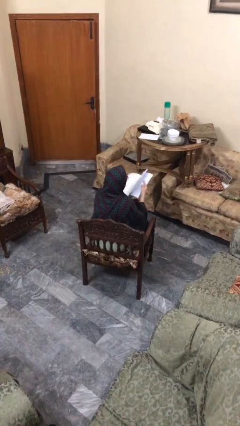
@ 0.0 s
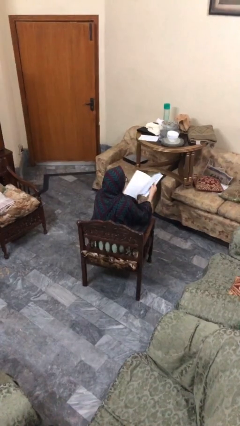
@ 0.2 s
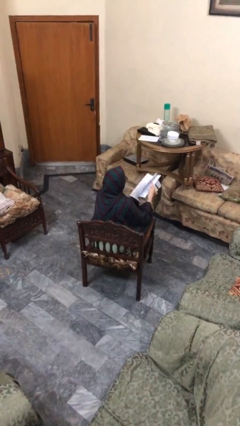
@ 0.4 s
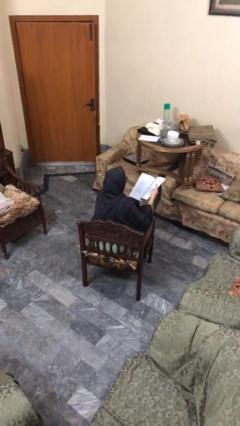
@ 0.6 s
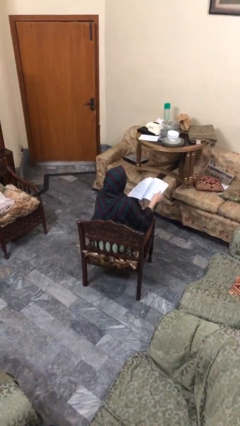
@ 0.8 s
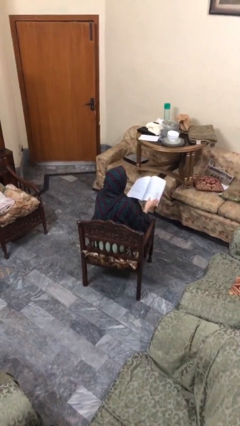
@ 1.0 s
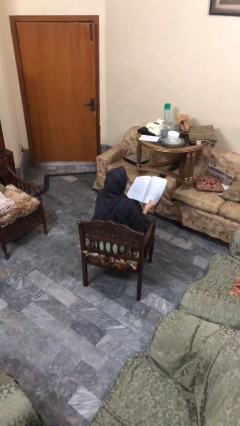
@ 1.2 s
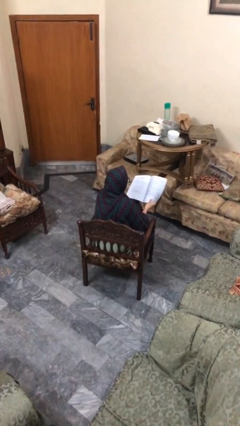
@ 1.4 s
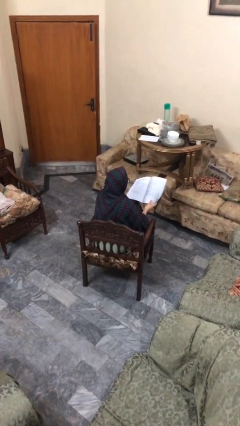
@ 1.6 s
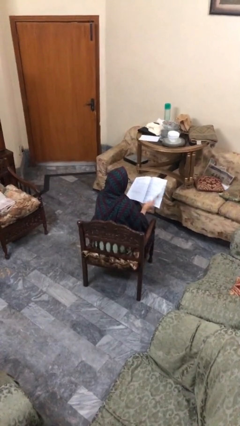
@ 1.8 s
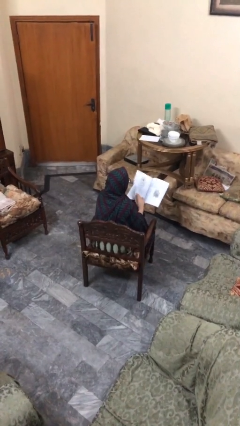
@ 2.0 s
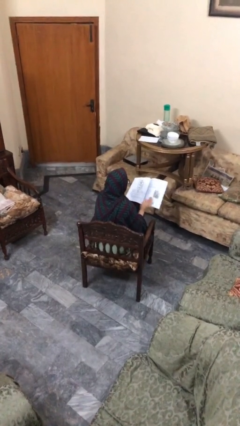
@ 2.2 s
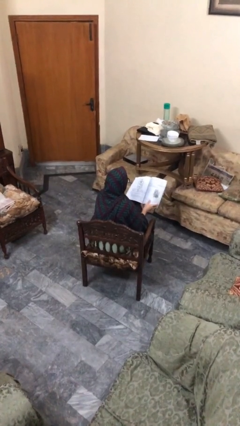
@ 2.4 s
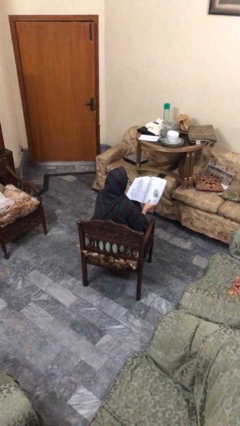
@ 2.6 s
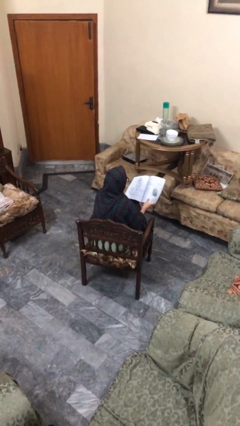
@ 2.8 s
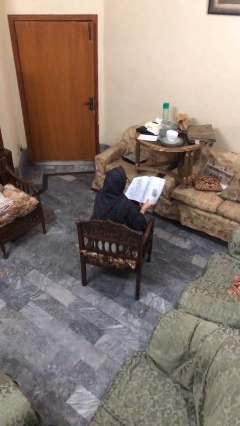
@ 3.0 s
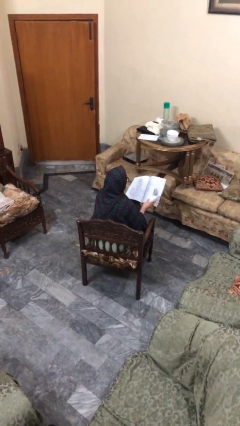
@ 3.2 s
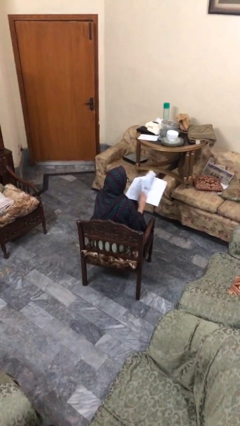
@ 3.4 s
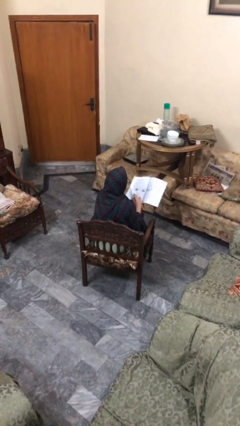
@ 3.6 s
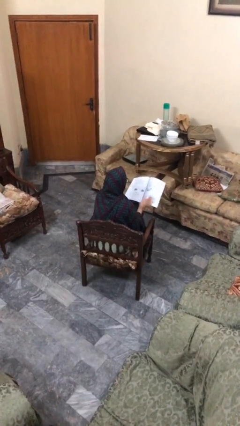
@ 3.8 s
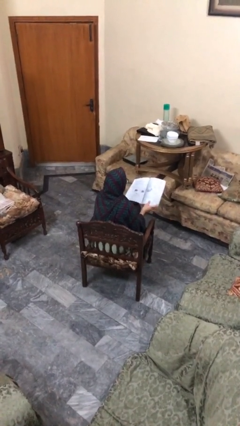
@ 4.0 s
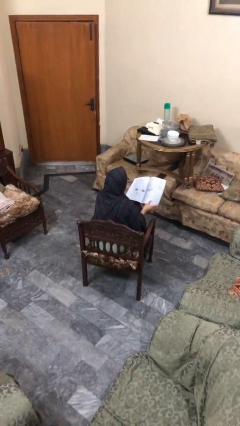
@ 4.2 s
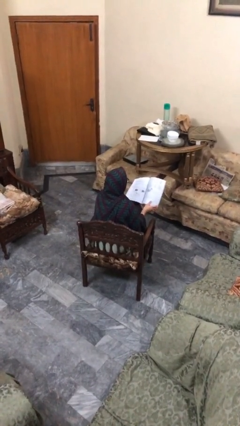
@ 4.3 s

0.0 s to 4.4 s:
person reads book

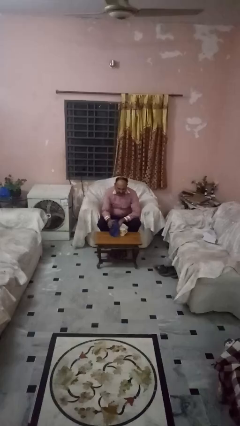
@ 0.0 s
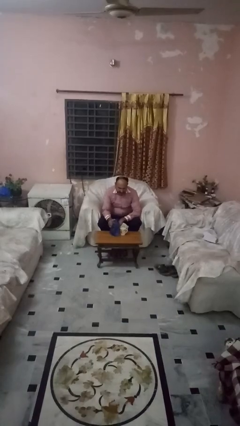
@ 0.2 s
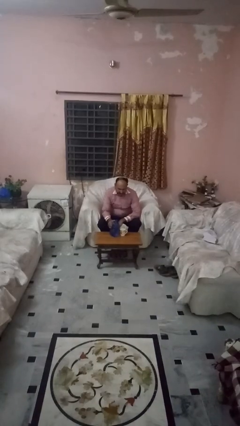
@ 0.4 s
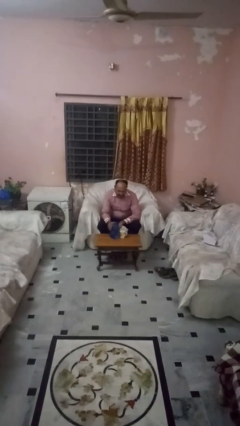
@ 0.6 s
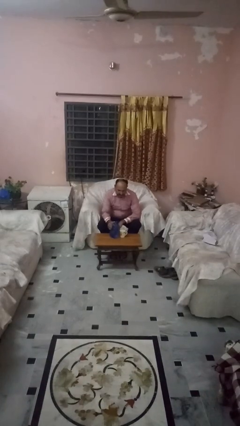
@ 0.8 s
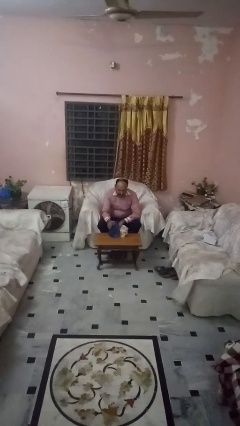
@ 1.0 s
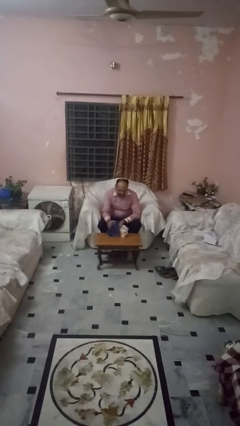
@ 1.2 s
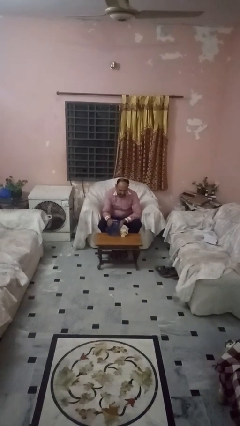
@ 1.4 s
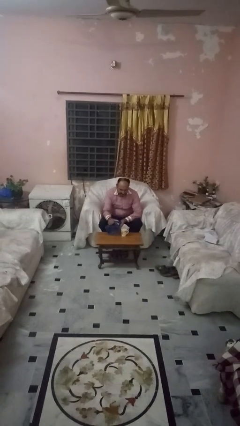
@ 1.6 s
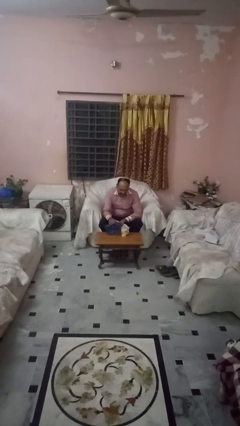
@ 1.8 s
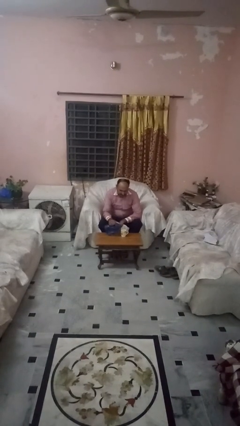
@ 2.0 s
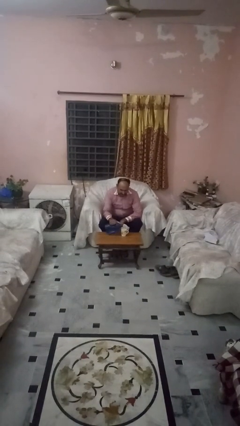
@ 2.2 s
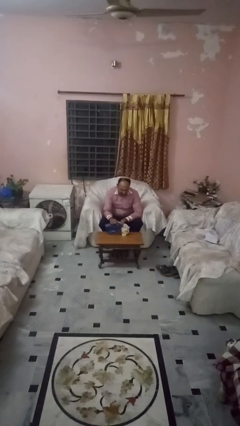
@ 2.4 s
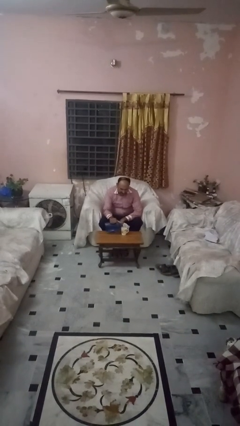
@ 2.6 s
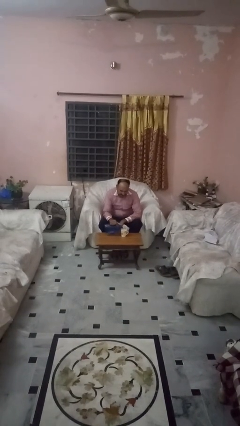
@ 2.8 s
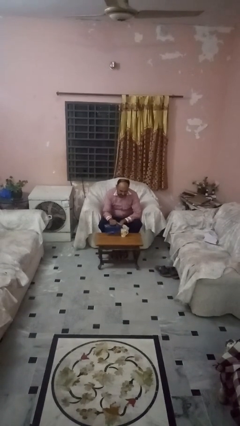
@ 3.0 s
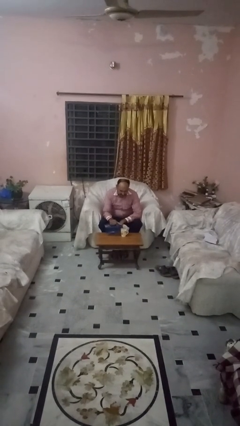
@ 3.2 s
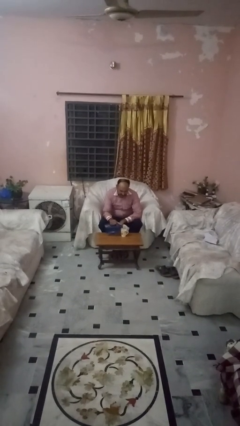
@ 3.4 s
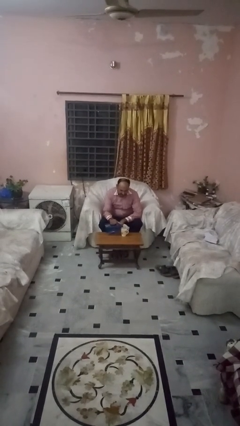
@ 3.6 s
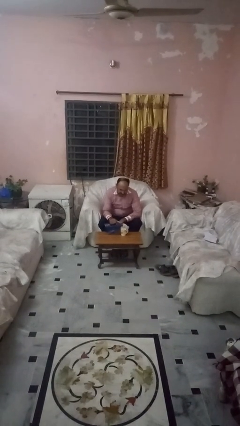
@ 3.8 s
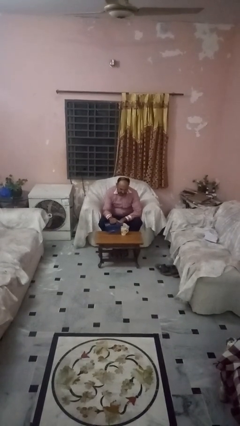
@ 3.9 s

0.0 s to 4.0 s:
person pours liquid into cup

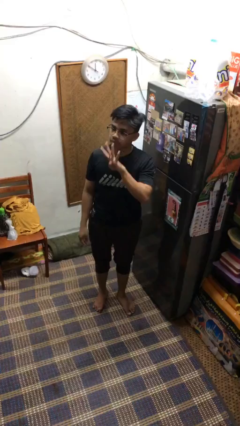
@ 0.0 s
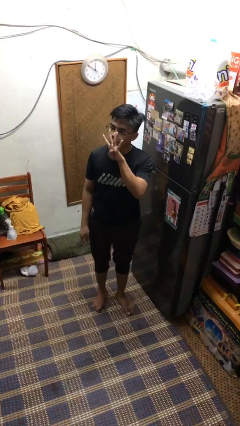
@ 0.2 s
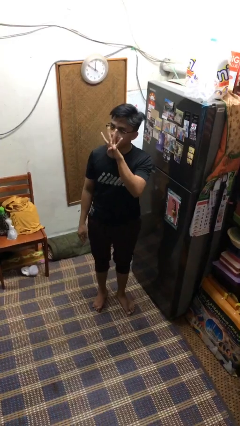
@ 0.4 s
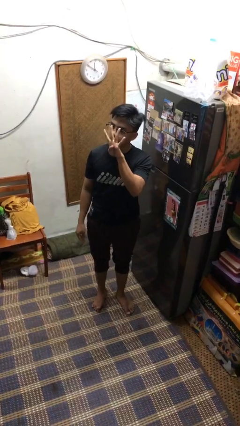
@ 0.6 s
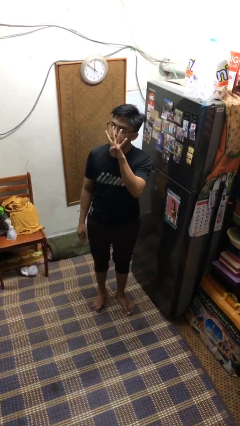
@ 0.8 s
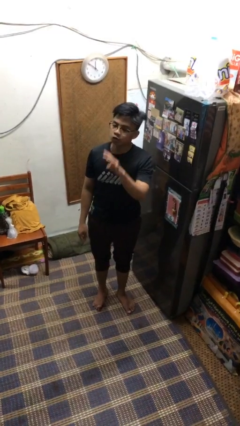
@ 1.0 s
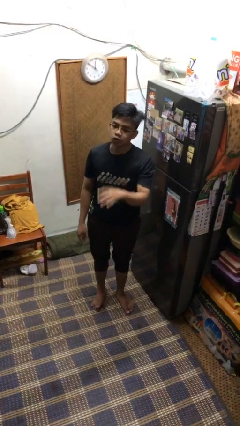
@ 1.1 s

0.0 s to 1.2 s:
person gestures number four

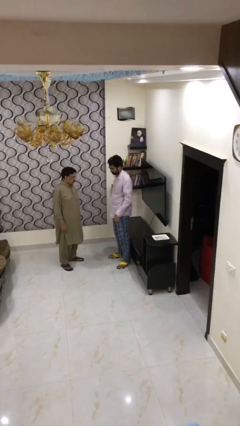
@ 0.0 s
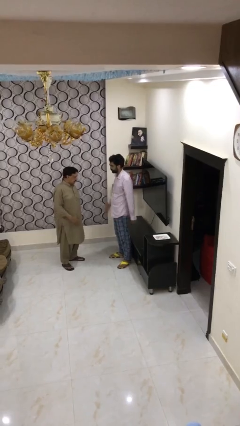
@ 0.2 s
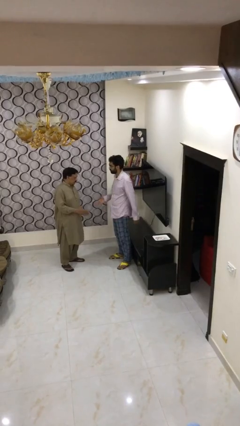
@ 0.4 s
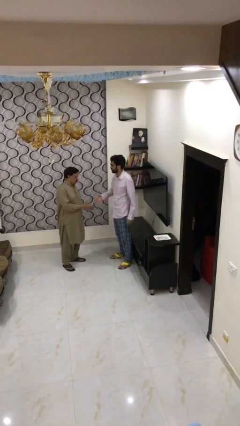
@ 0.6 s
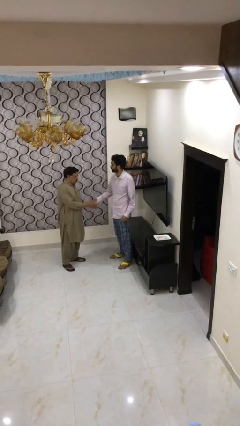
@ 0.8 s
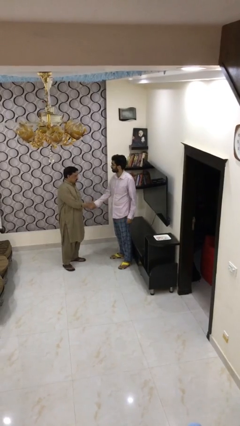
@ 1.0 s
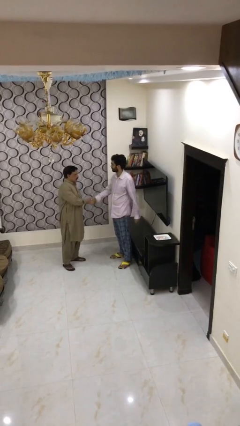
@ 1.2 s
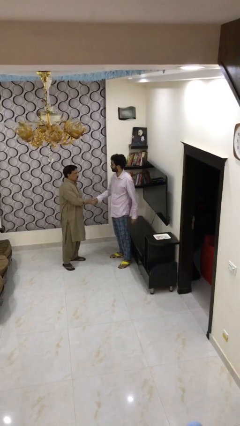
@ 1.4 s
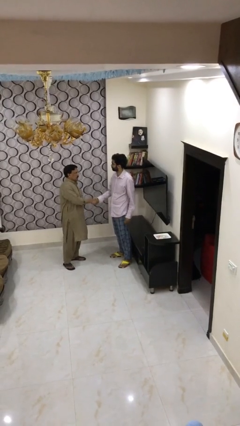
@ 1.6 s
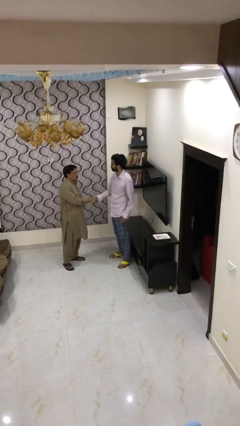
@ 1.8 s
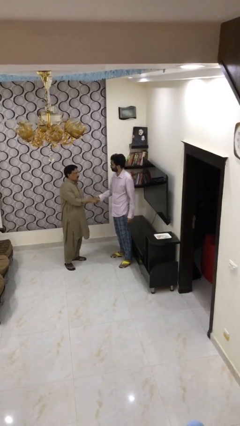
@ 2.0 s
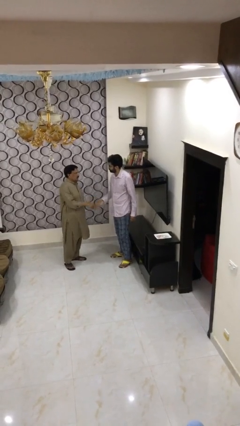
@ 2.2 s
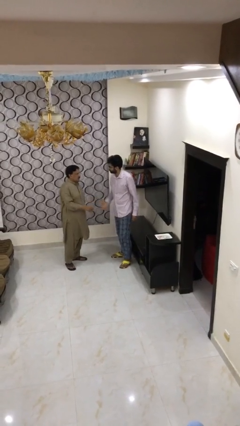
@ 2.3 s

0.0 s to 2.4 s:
person shakes hand

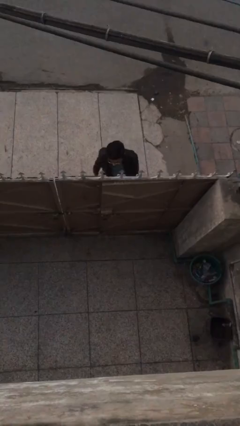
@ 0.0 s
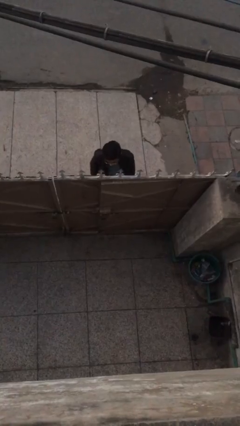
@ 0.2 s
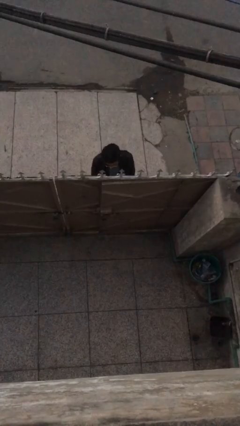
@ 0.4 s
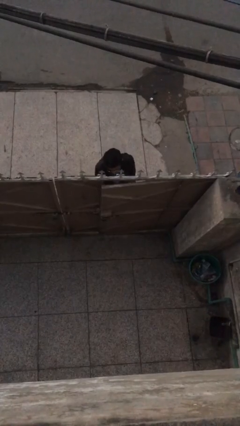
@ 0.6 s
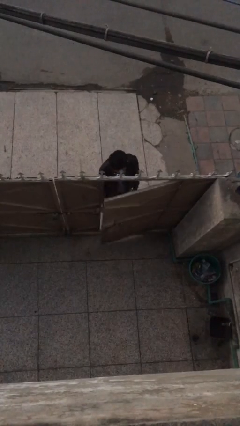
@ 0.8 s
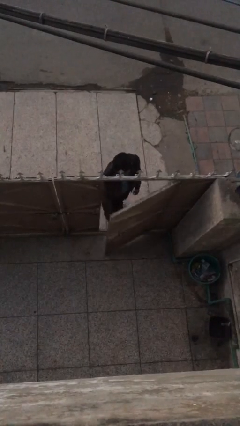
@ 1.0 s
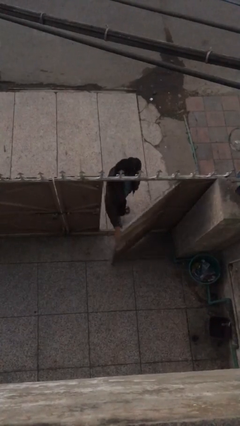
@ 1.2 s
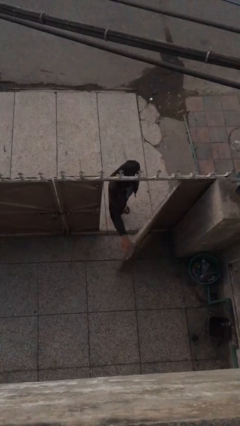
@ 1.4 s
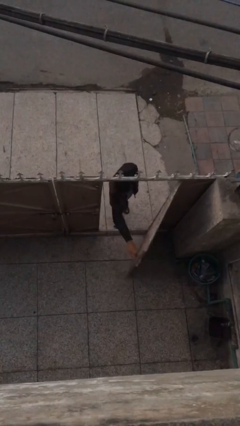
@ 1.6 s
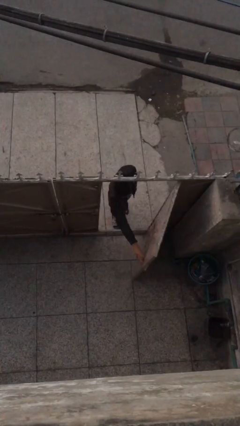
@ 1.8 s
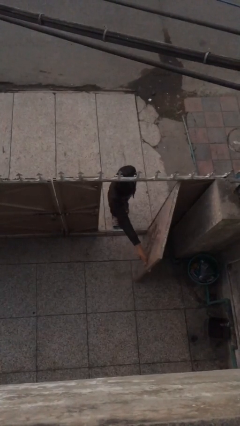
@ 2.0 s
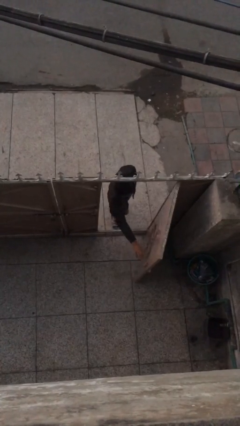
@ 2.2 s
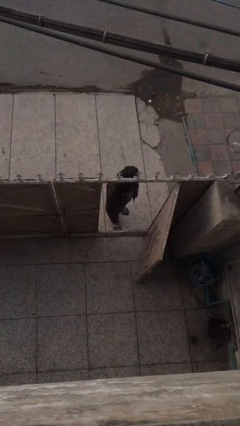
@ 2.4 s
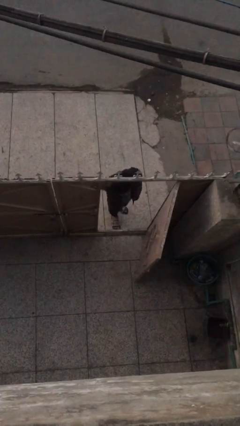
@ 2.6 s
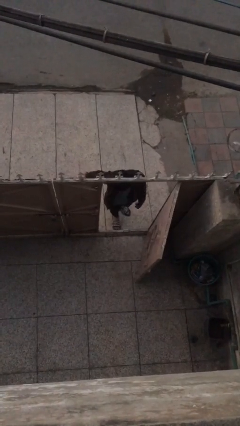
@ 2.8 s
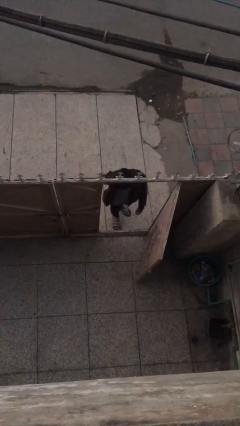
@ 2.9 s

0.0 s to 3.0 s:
person opens facility door

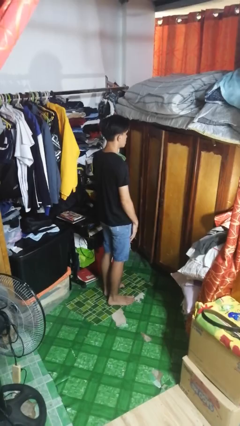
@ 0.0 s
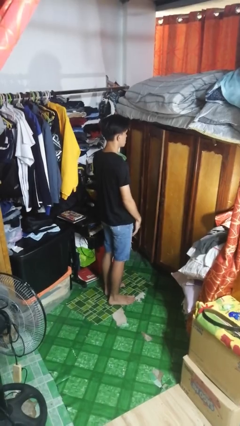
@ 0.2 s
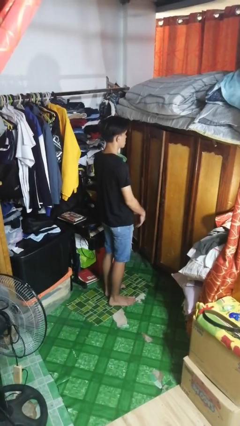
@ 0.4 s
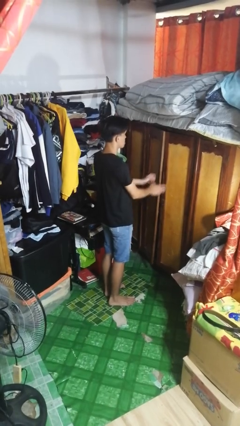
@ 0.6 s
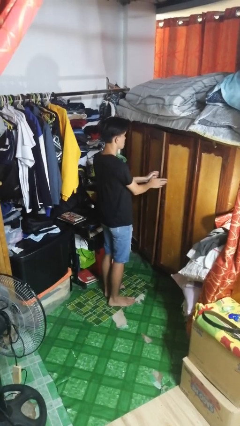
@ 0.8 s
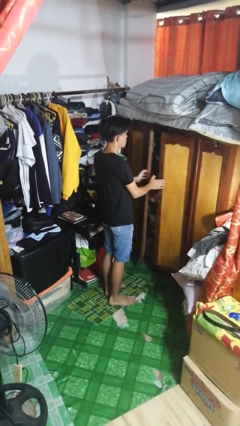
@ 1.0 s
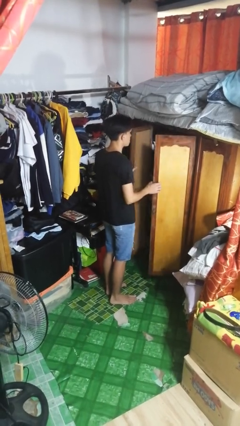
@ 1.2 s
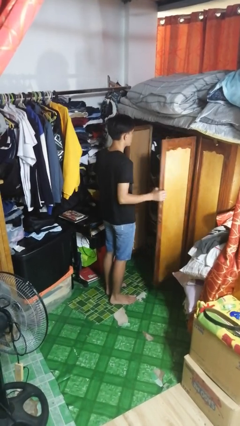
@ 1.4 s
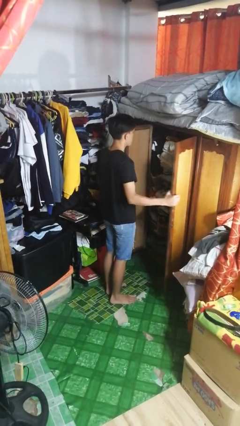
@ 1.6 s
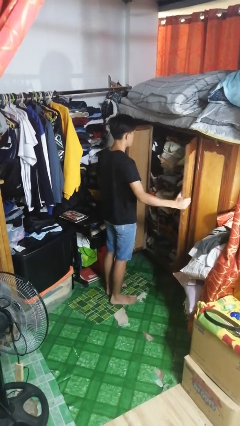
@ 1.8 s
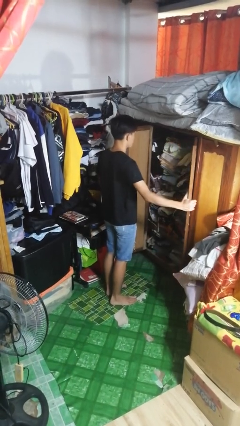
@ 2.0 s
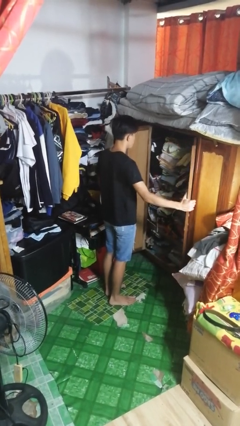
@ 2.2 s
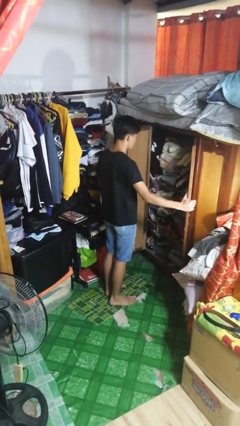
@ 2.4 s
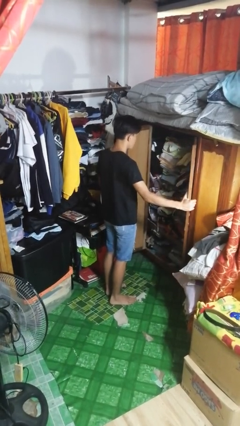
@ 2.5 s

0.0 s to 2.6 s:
person opens closet door
